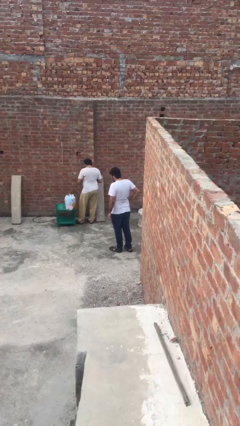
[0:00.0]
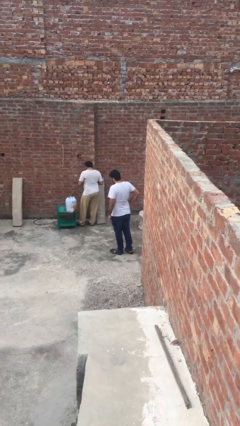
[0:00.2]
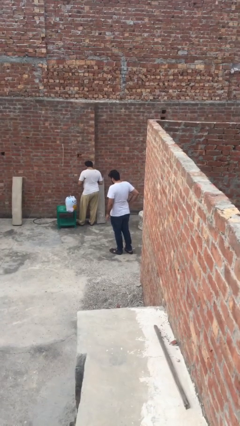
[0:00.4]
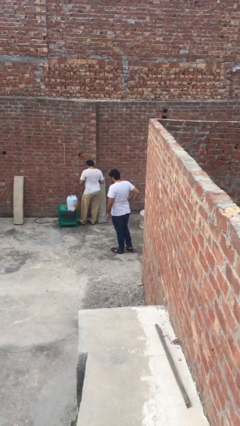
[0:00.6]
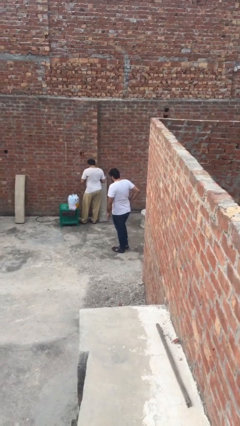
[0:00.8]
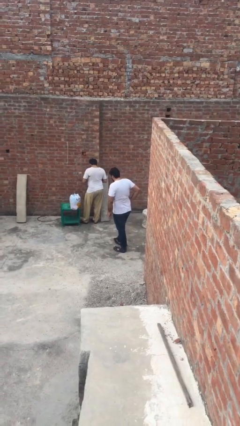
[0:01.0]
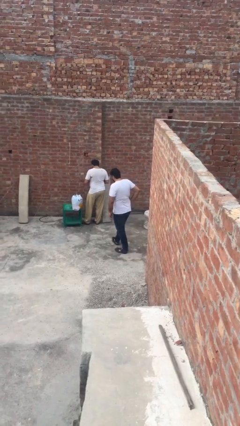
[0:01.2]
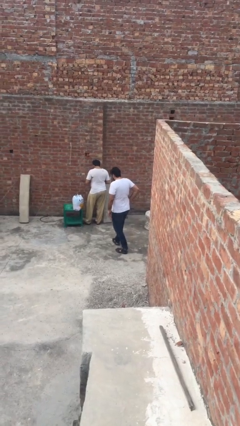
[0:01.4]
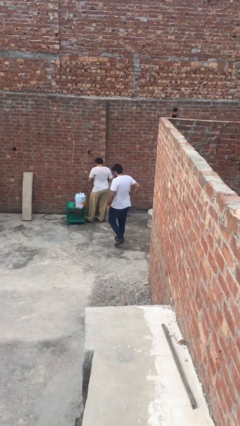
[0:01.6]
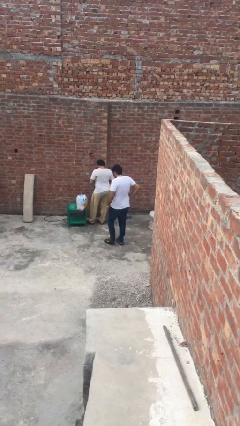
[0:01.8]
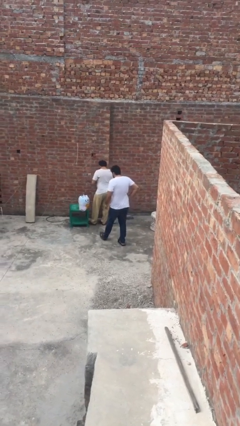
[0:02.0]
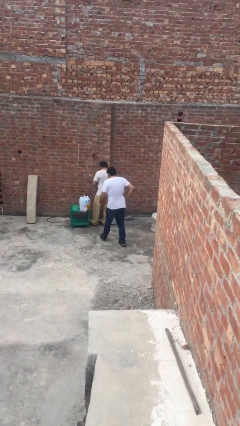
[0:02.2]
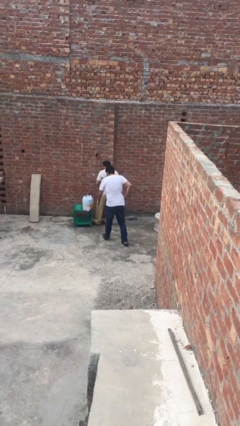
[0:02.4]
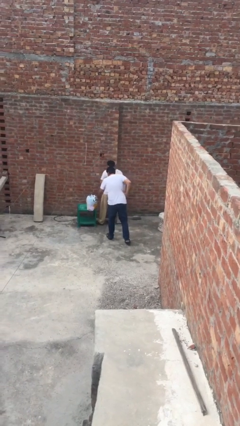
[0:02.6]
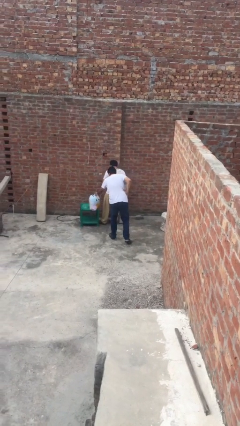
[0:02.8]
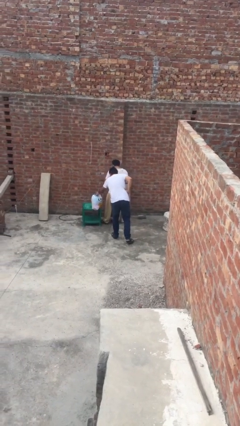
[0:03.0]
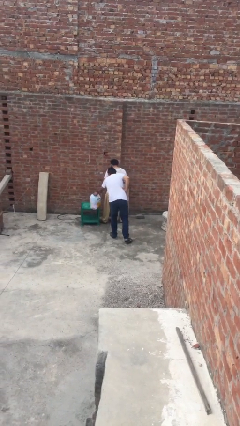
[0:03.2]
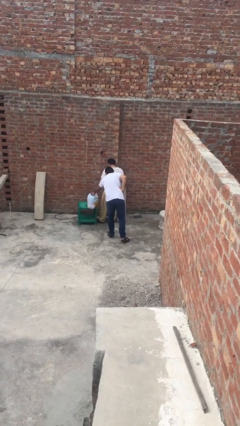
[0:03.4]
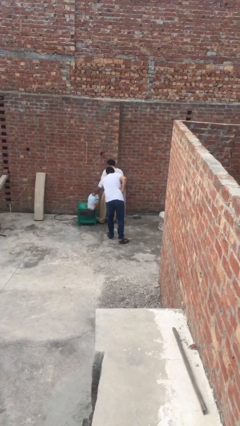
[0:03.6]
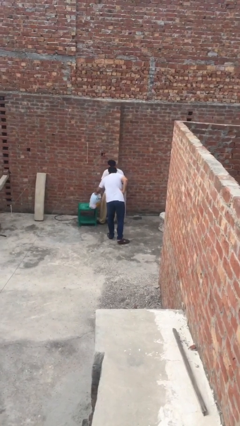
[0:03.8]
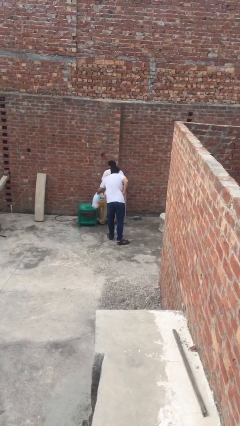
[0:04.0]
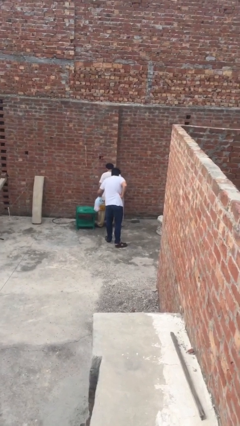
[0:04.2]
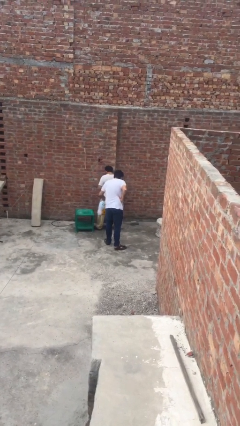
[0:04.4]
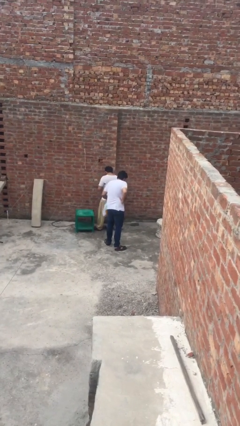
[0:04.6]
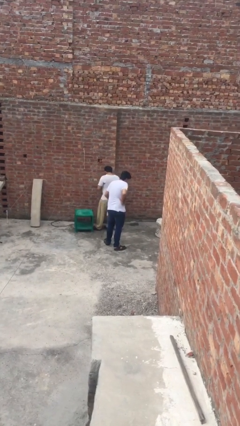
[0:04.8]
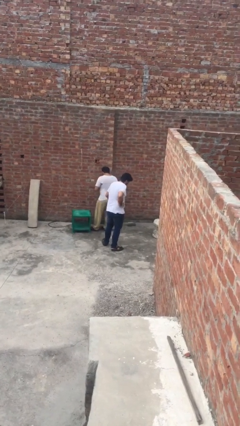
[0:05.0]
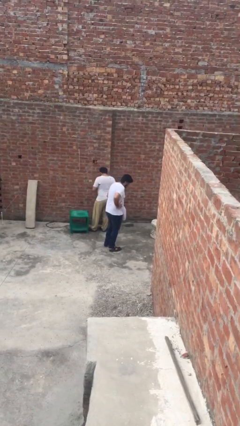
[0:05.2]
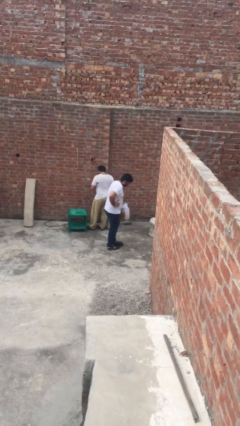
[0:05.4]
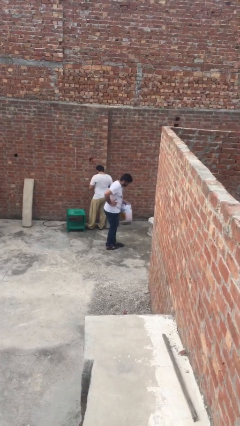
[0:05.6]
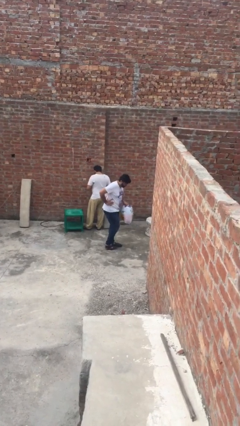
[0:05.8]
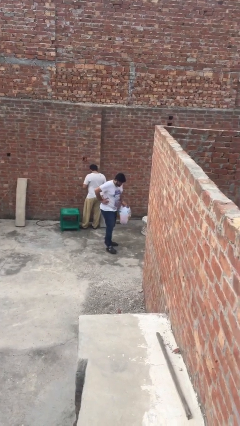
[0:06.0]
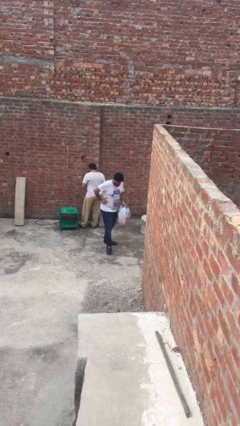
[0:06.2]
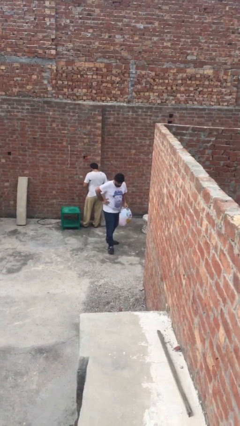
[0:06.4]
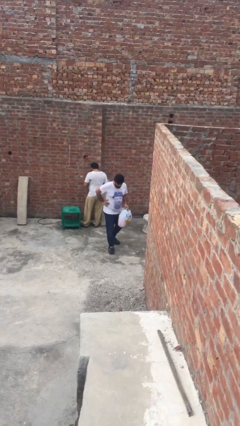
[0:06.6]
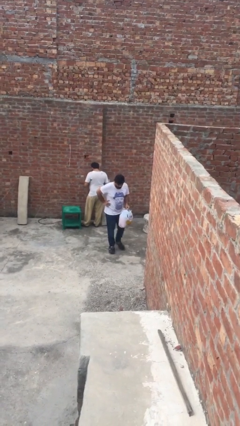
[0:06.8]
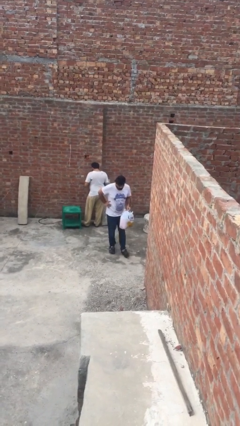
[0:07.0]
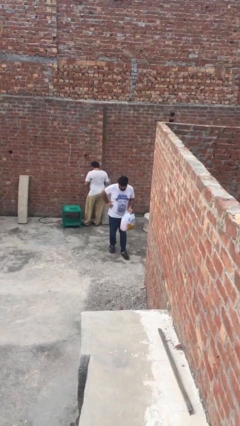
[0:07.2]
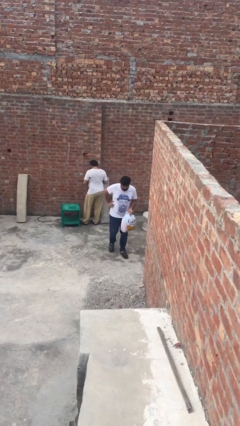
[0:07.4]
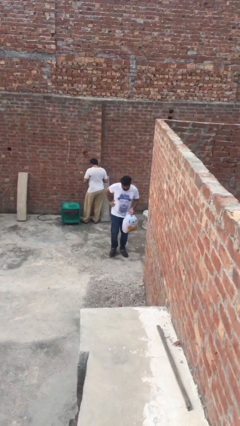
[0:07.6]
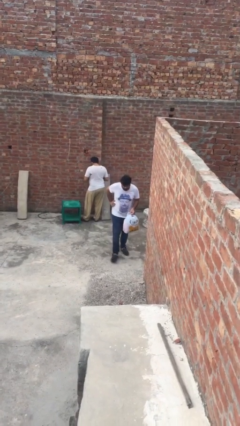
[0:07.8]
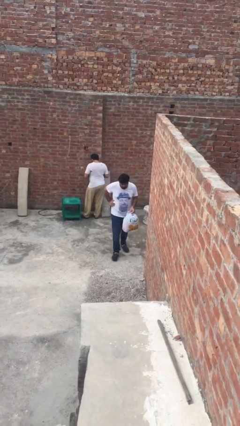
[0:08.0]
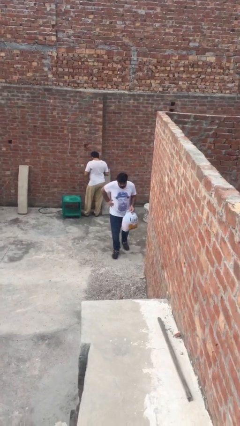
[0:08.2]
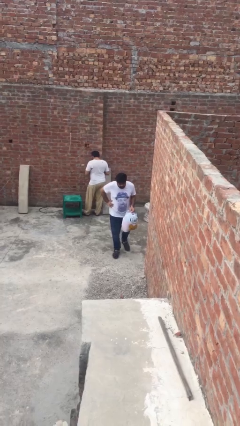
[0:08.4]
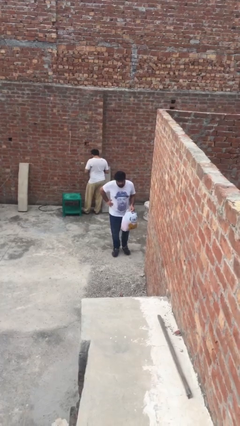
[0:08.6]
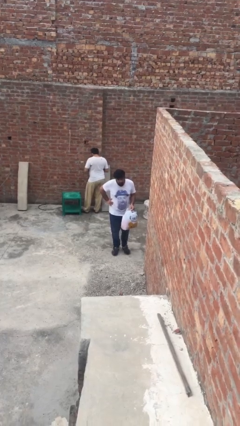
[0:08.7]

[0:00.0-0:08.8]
person steals object from person

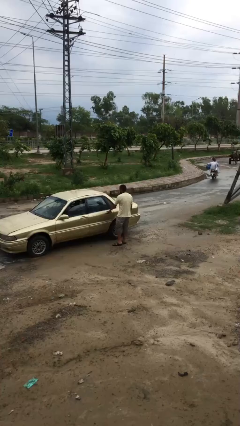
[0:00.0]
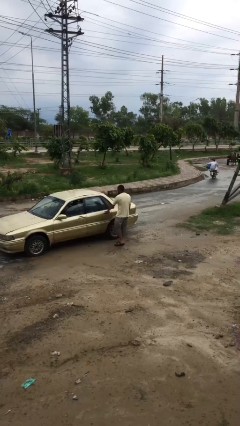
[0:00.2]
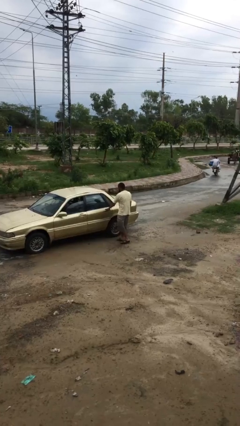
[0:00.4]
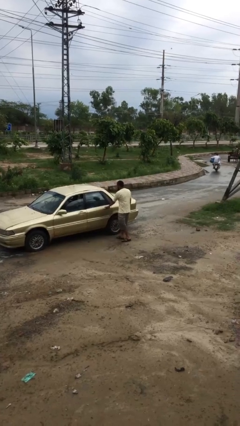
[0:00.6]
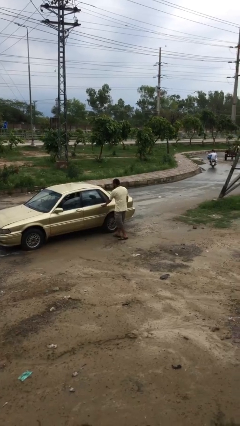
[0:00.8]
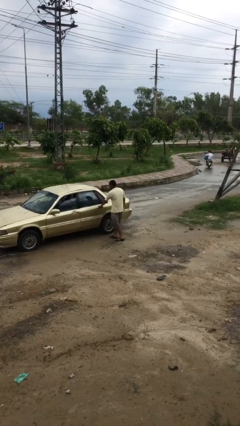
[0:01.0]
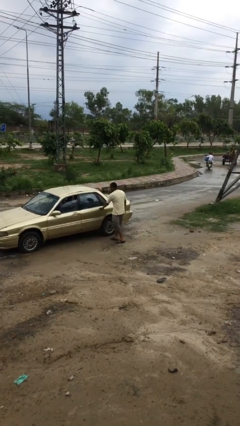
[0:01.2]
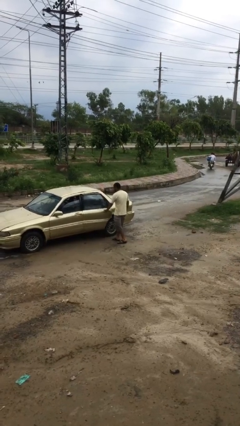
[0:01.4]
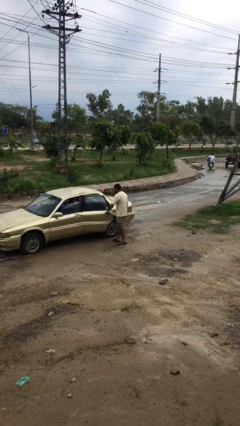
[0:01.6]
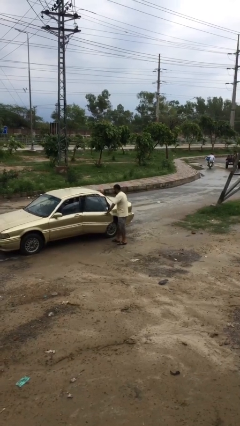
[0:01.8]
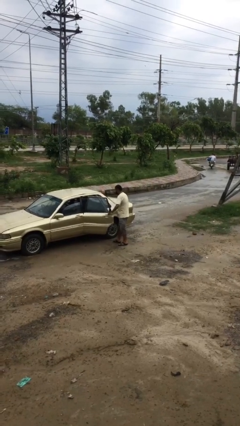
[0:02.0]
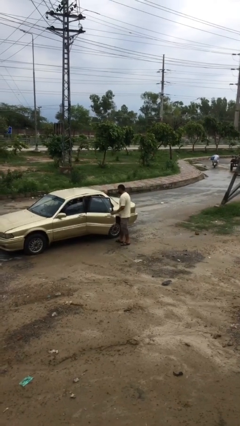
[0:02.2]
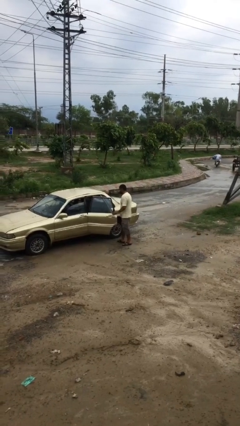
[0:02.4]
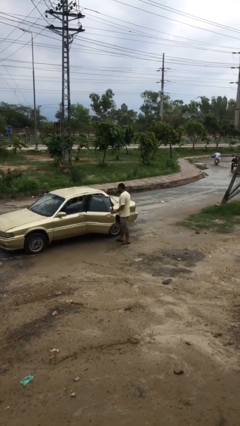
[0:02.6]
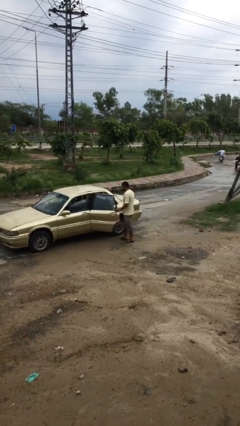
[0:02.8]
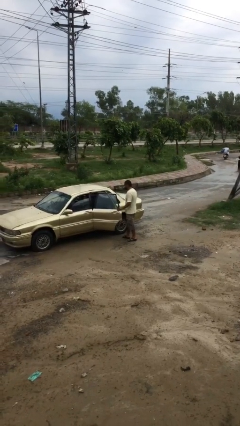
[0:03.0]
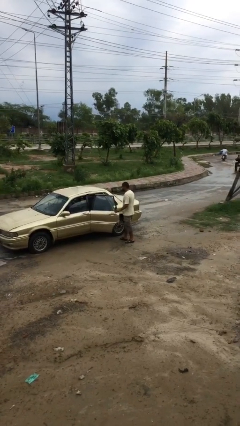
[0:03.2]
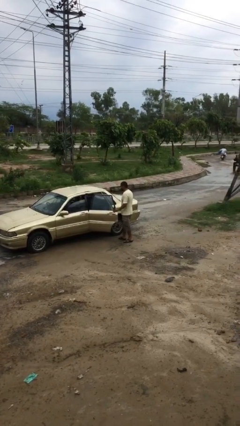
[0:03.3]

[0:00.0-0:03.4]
person opens car door

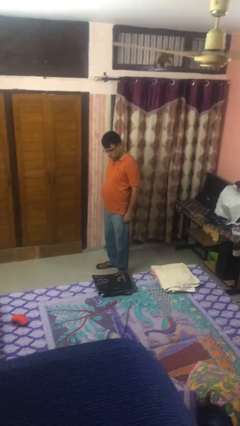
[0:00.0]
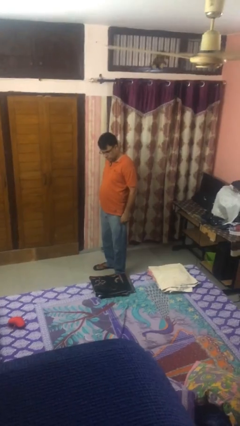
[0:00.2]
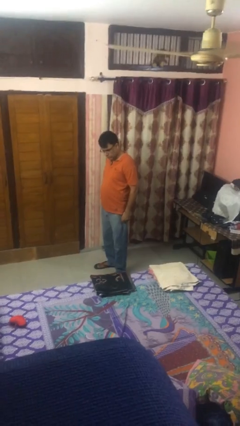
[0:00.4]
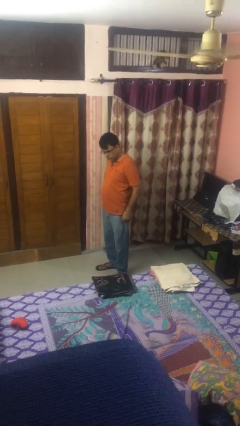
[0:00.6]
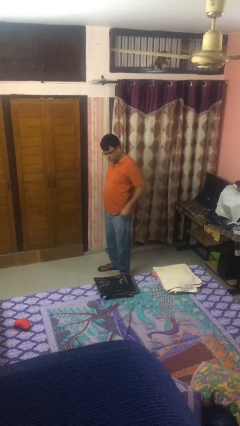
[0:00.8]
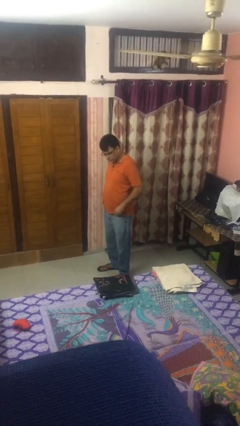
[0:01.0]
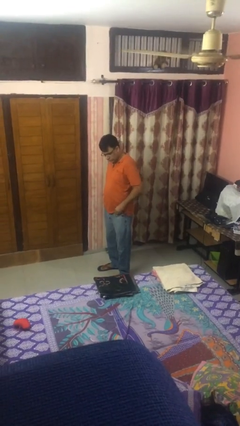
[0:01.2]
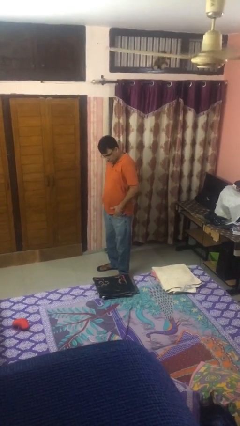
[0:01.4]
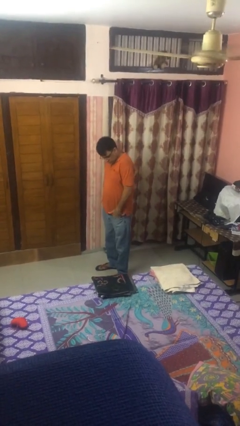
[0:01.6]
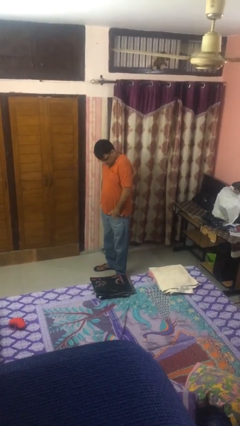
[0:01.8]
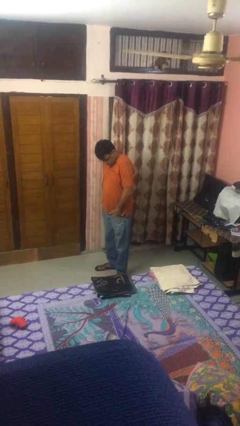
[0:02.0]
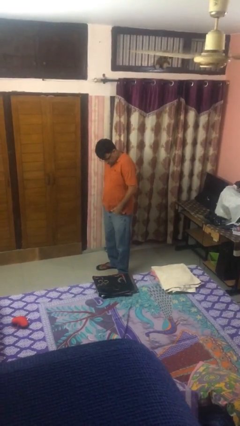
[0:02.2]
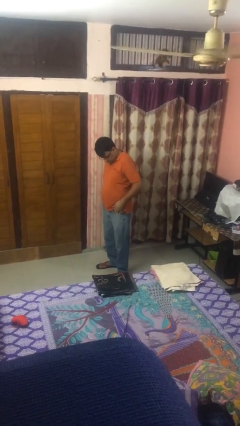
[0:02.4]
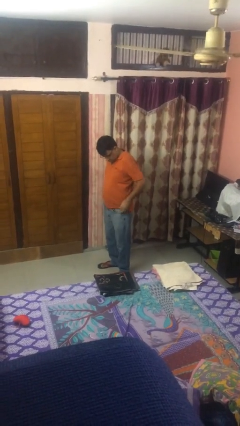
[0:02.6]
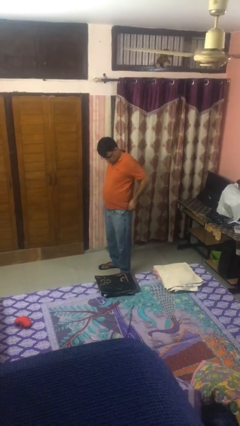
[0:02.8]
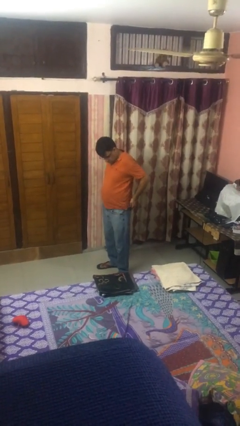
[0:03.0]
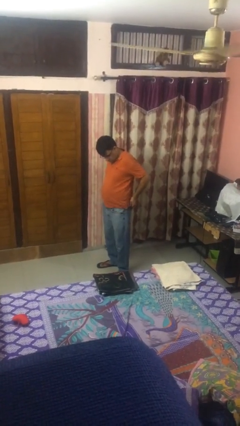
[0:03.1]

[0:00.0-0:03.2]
person puts hands in back pockets

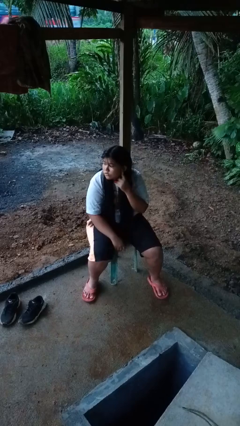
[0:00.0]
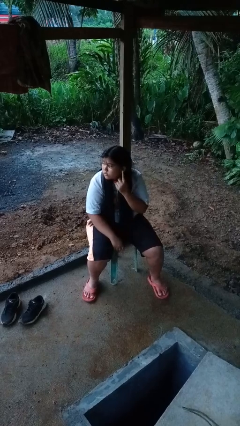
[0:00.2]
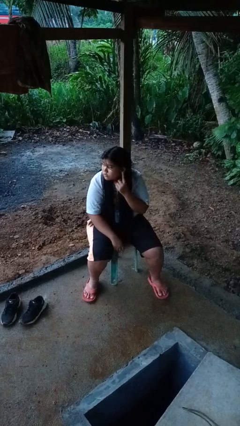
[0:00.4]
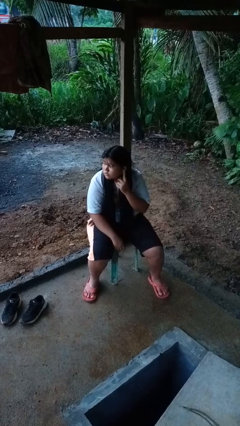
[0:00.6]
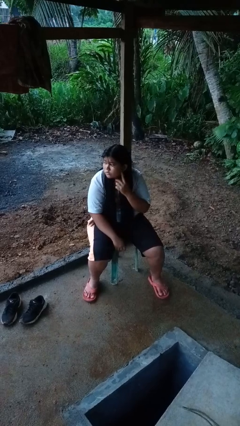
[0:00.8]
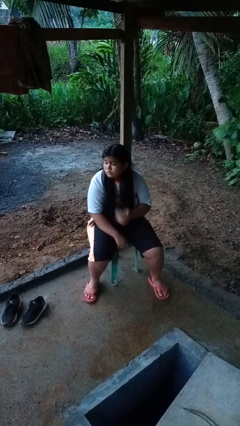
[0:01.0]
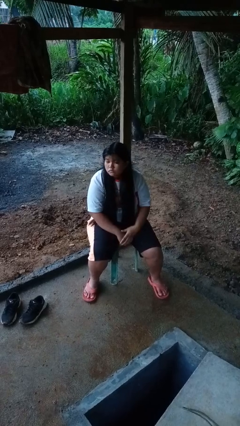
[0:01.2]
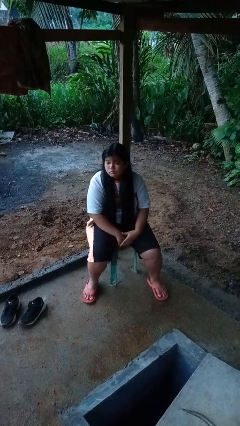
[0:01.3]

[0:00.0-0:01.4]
person gestures listen closely

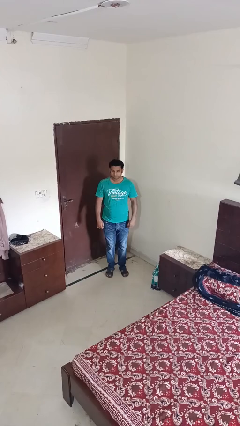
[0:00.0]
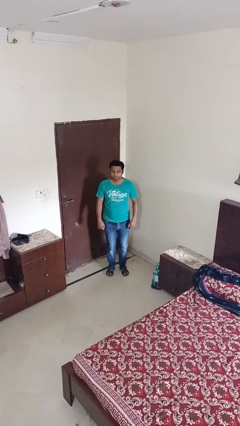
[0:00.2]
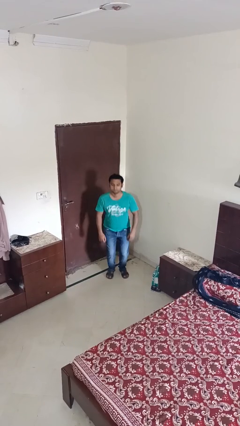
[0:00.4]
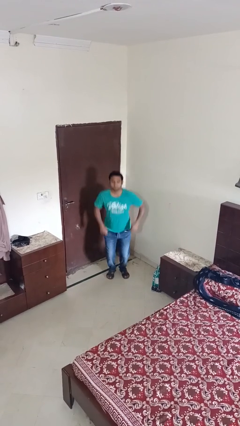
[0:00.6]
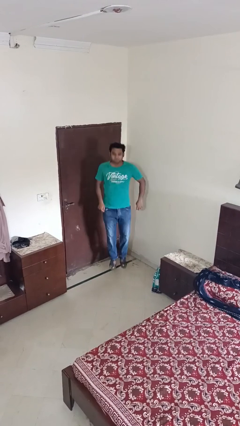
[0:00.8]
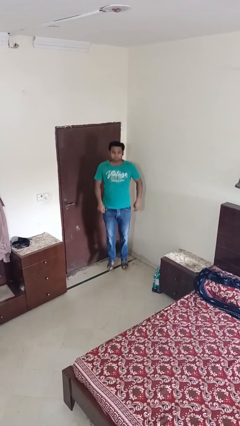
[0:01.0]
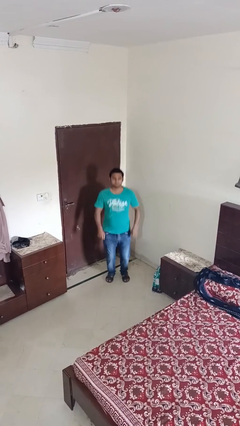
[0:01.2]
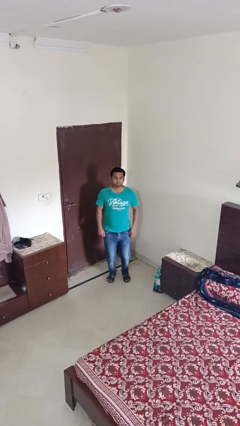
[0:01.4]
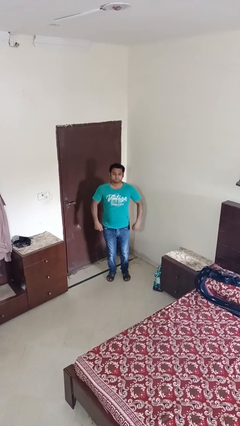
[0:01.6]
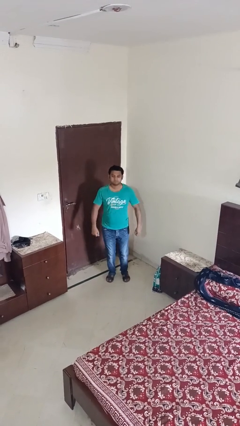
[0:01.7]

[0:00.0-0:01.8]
person jumps
